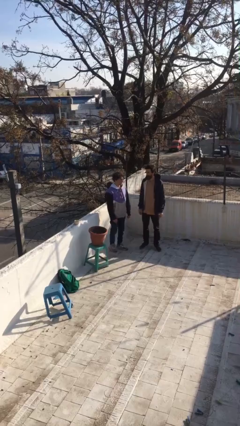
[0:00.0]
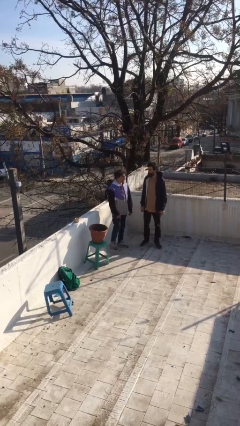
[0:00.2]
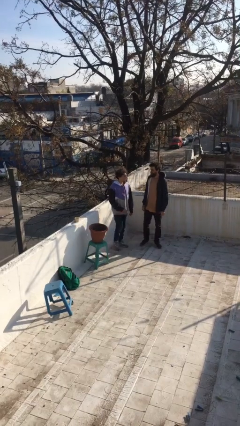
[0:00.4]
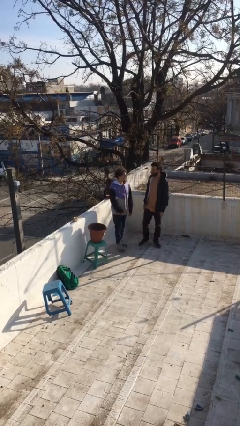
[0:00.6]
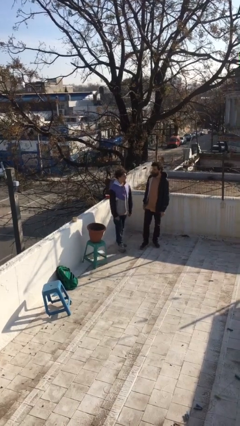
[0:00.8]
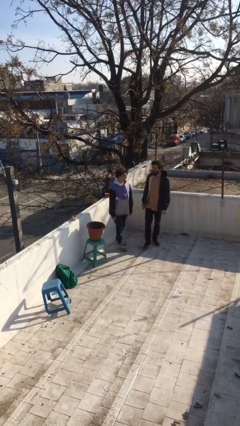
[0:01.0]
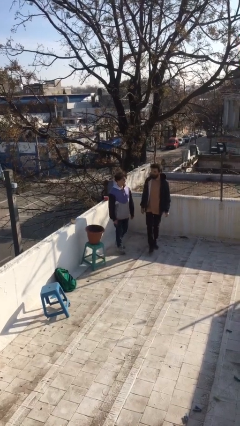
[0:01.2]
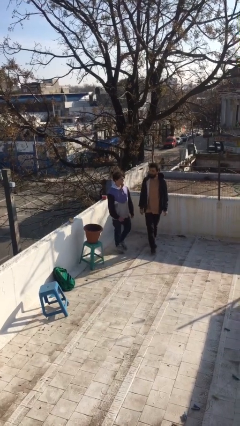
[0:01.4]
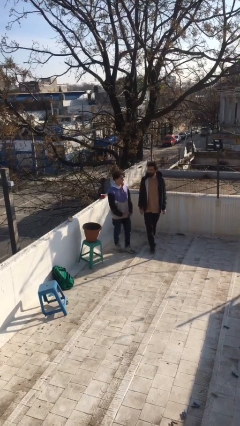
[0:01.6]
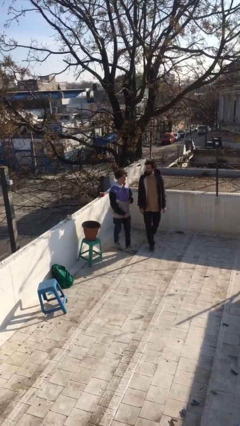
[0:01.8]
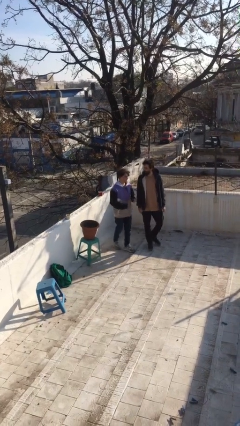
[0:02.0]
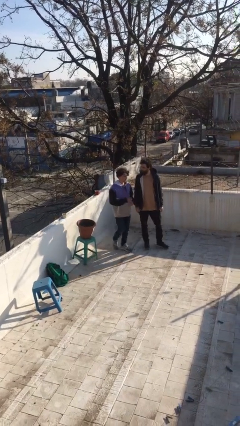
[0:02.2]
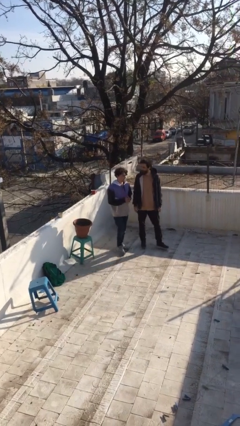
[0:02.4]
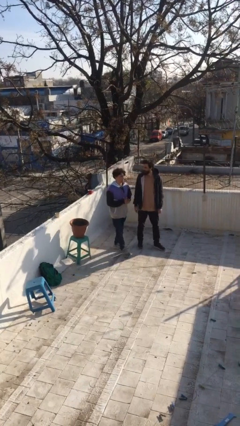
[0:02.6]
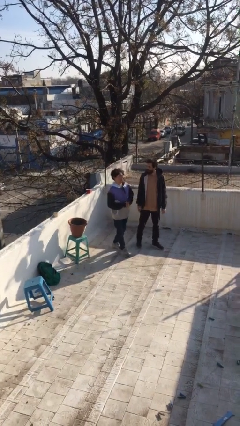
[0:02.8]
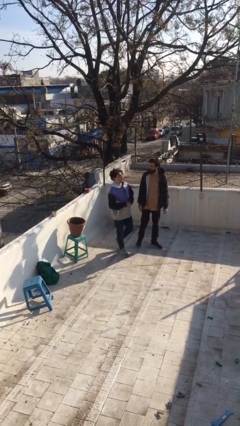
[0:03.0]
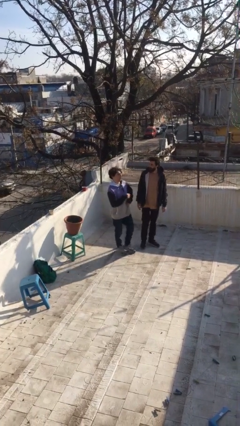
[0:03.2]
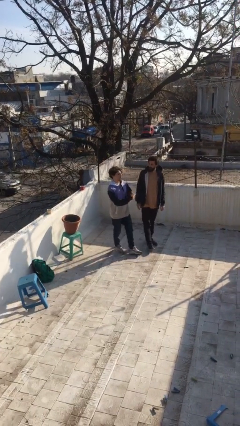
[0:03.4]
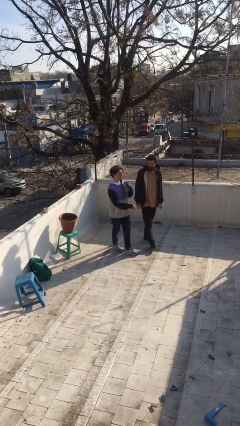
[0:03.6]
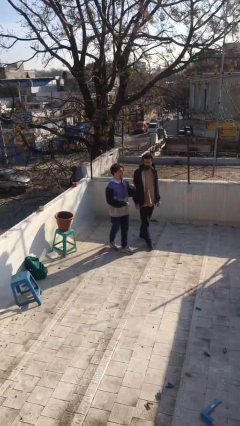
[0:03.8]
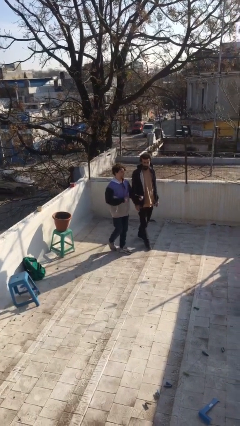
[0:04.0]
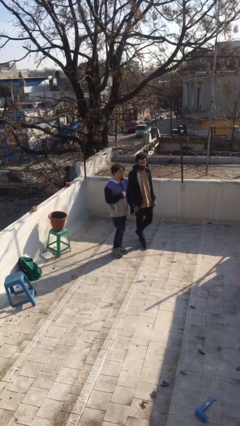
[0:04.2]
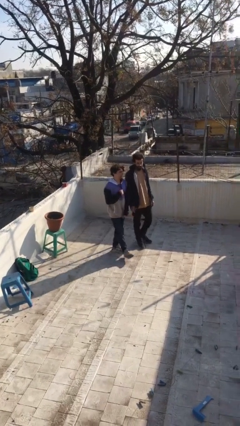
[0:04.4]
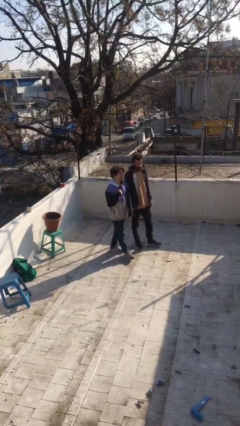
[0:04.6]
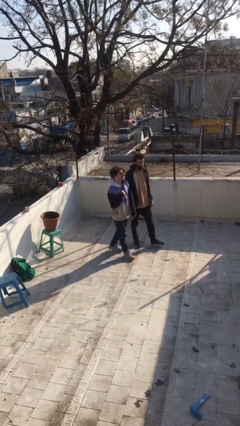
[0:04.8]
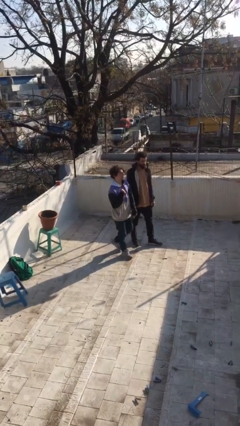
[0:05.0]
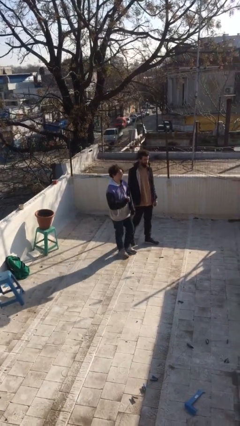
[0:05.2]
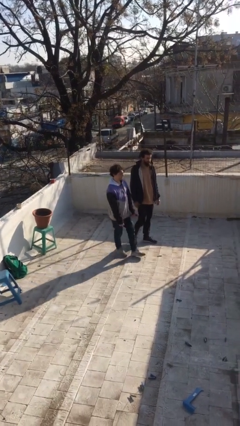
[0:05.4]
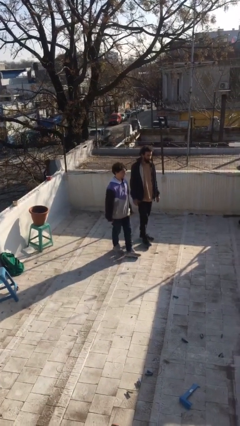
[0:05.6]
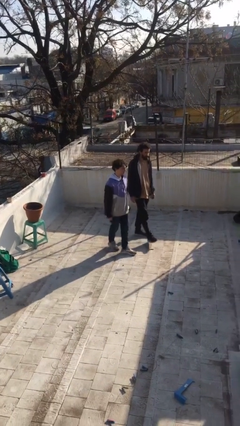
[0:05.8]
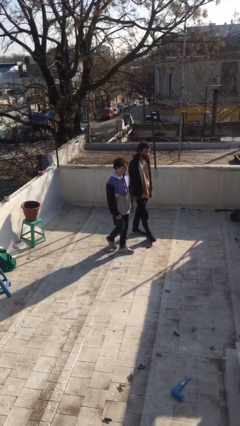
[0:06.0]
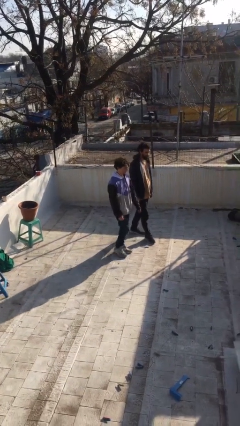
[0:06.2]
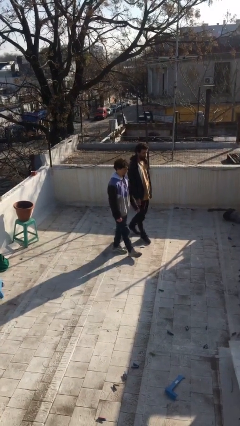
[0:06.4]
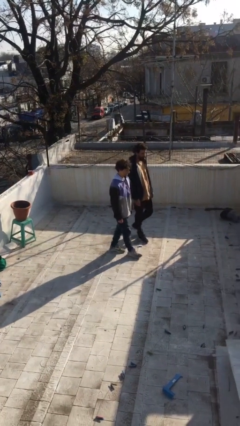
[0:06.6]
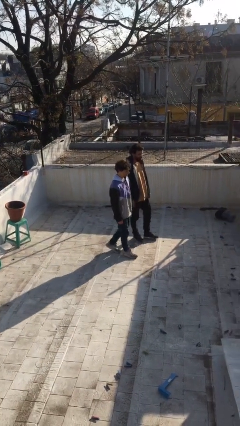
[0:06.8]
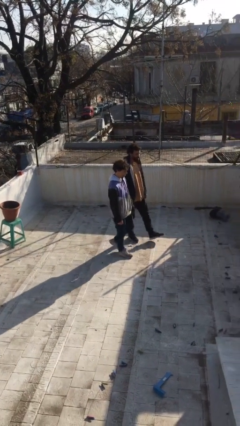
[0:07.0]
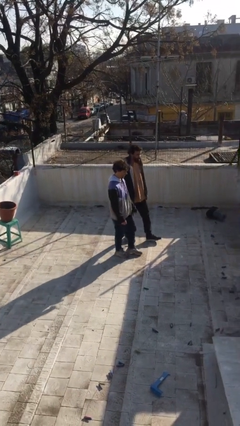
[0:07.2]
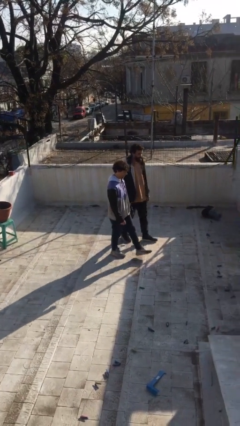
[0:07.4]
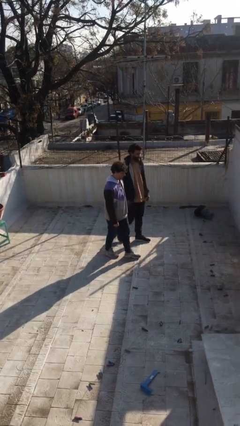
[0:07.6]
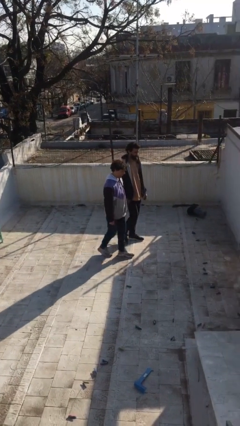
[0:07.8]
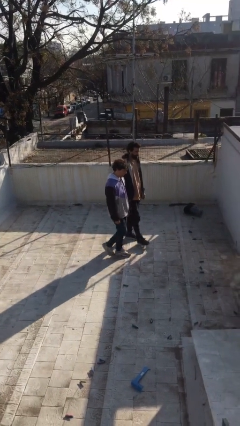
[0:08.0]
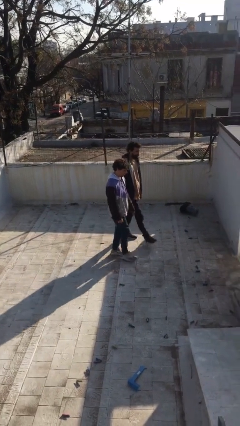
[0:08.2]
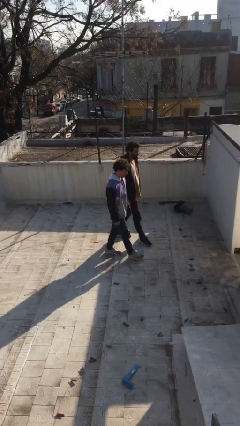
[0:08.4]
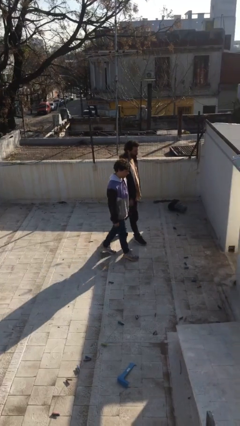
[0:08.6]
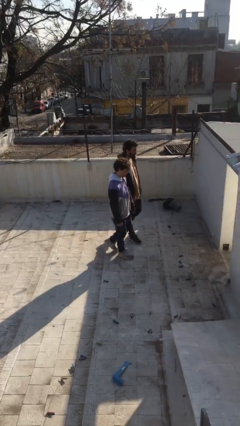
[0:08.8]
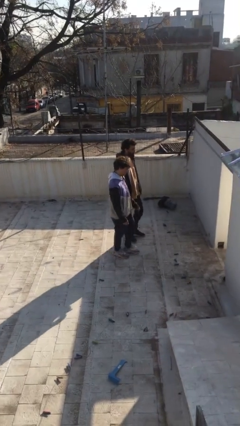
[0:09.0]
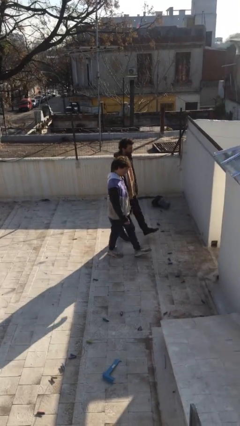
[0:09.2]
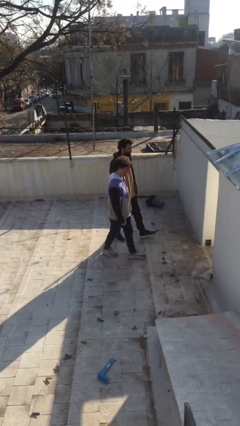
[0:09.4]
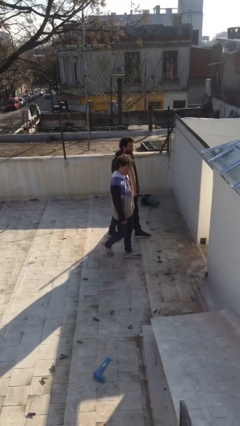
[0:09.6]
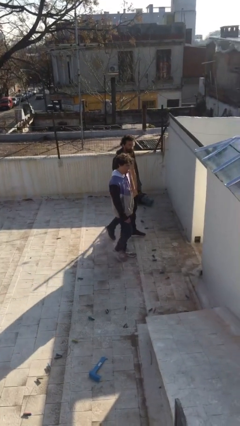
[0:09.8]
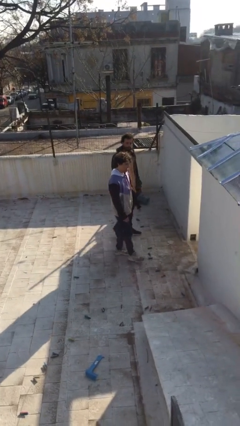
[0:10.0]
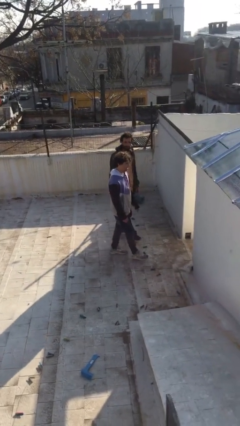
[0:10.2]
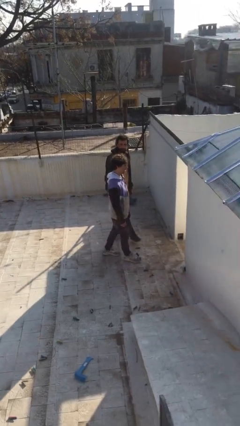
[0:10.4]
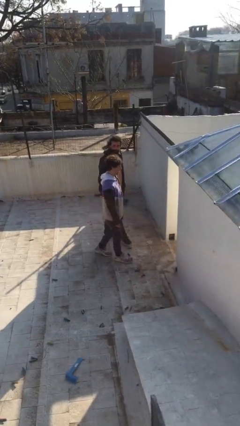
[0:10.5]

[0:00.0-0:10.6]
person talks to person

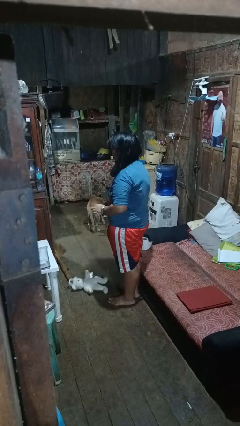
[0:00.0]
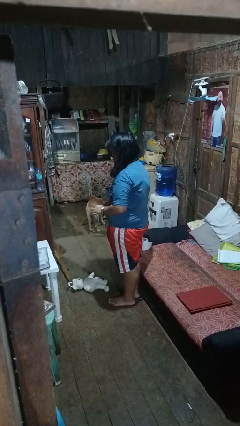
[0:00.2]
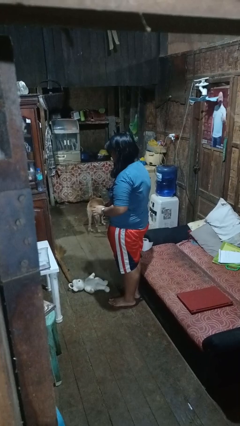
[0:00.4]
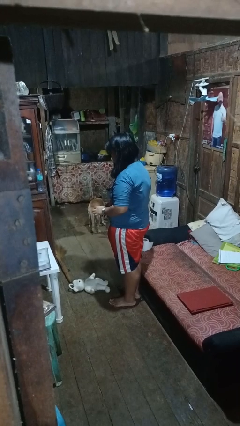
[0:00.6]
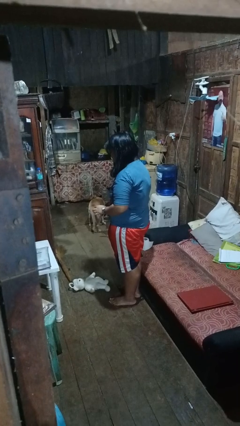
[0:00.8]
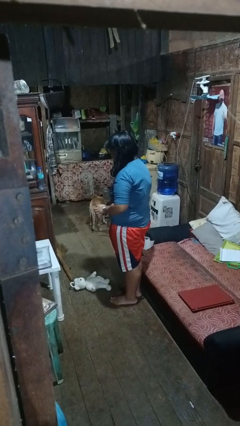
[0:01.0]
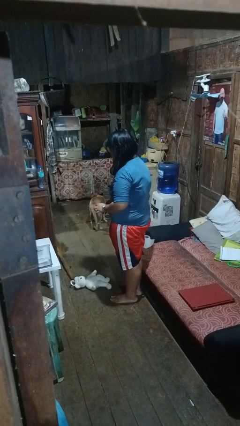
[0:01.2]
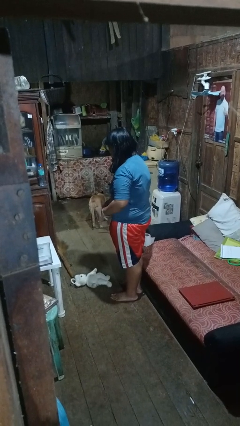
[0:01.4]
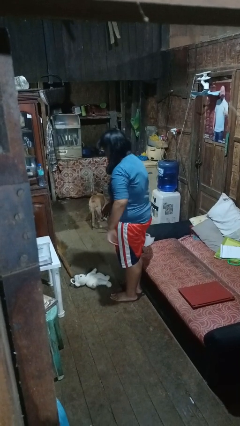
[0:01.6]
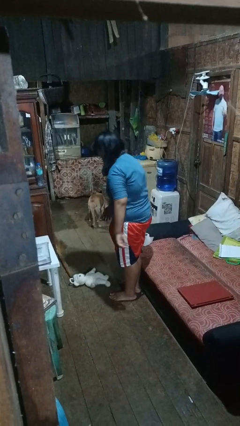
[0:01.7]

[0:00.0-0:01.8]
person drops object

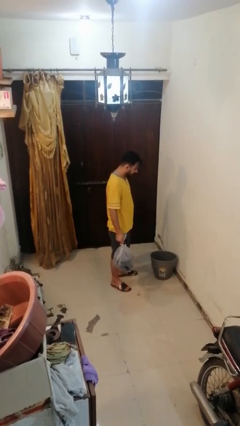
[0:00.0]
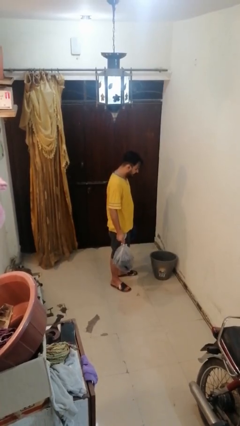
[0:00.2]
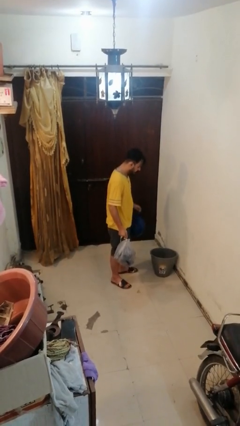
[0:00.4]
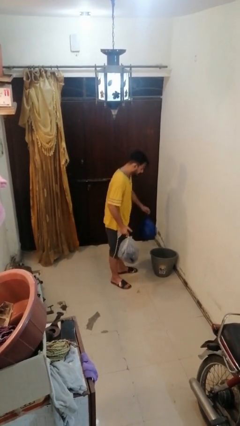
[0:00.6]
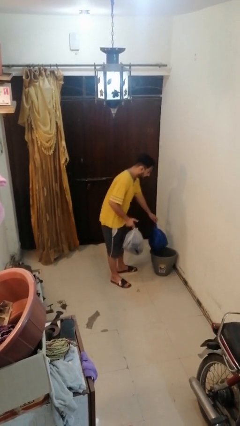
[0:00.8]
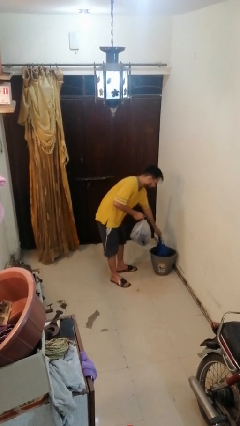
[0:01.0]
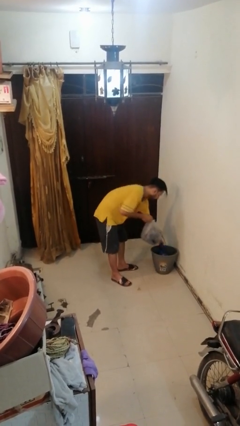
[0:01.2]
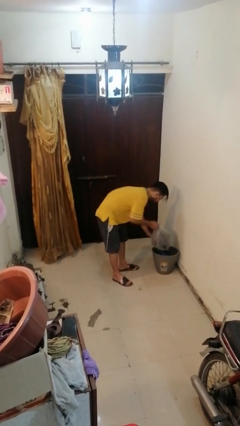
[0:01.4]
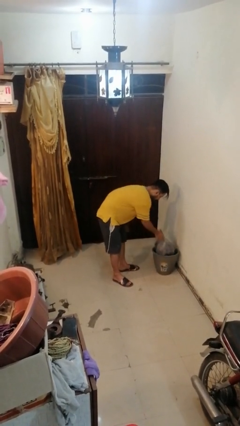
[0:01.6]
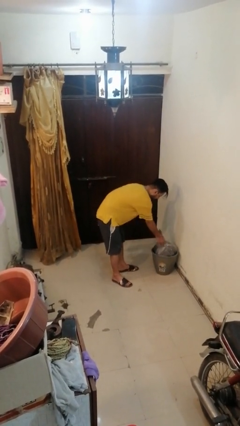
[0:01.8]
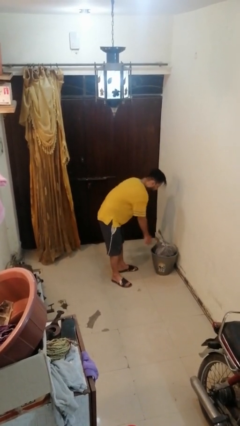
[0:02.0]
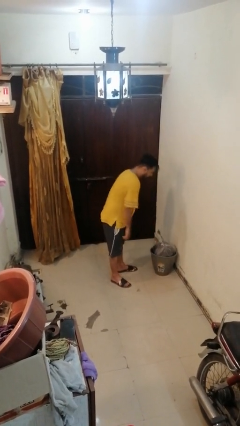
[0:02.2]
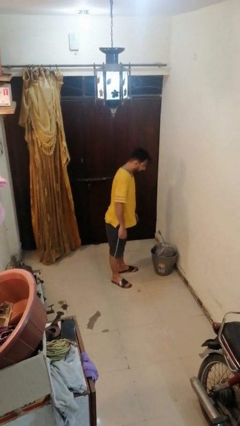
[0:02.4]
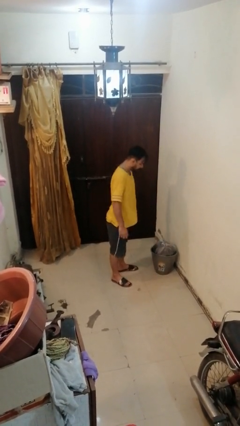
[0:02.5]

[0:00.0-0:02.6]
person discards trash

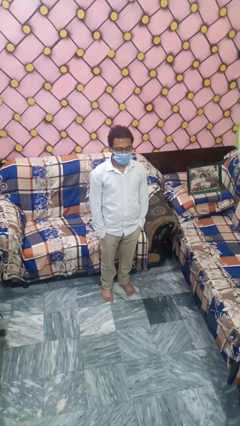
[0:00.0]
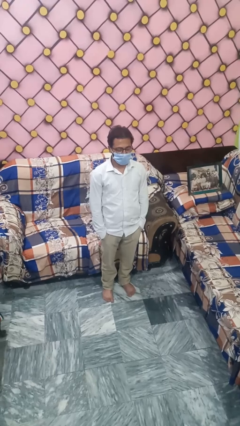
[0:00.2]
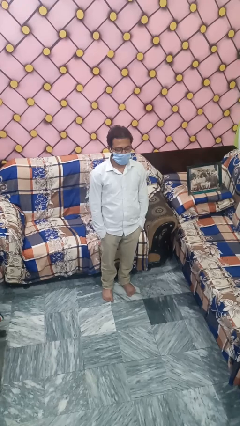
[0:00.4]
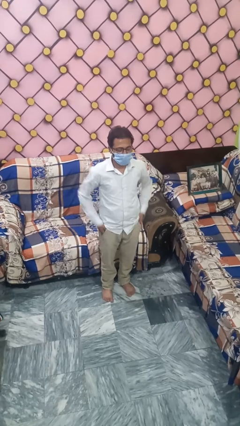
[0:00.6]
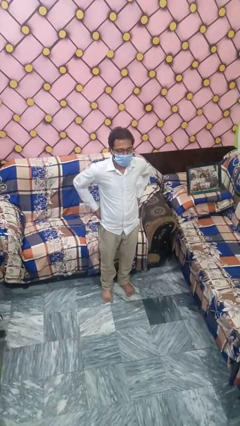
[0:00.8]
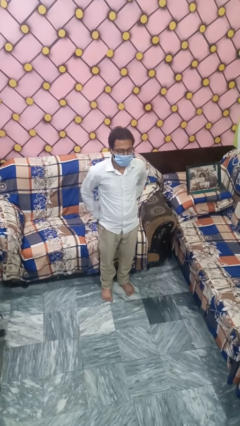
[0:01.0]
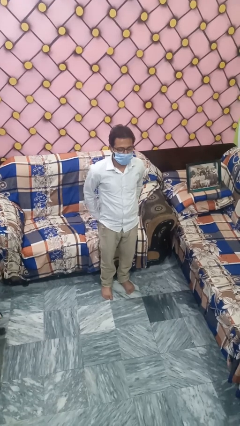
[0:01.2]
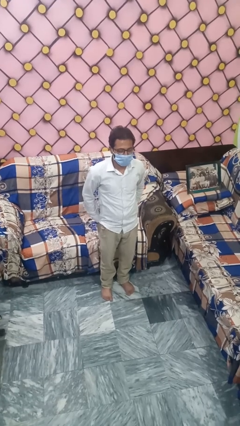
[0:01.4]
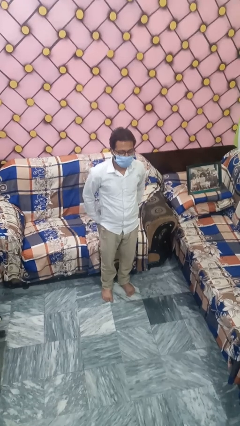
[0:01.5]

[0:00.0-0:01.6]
person puts hands in back pockets

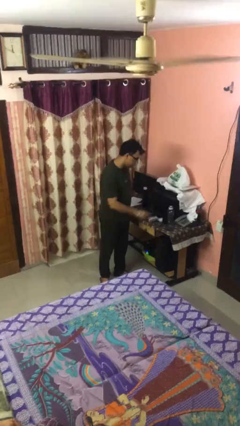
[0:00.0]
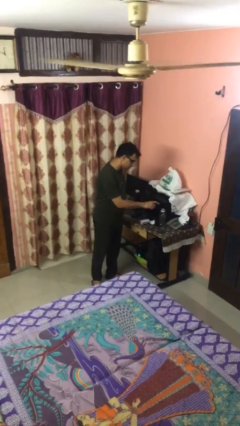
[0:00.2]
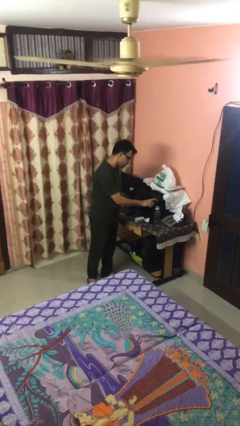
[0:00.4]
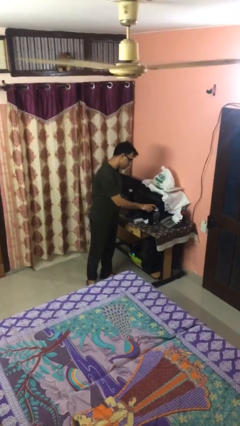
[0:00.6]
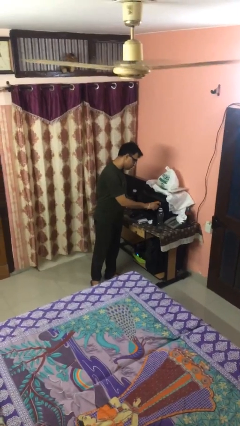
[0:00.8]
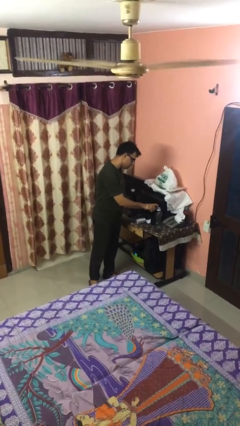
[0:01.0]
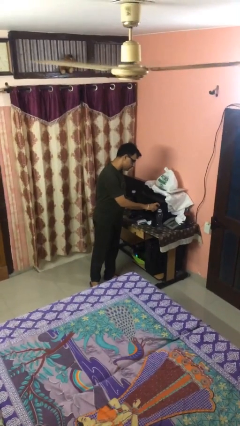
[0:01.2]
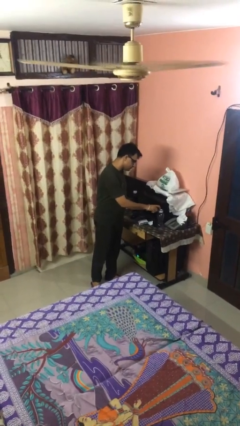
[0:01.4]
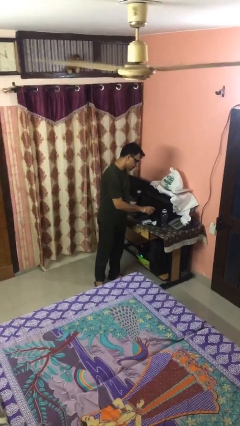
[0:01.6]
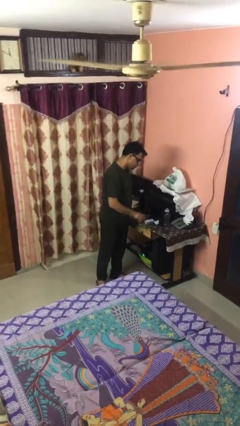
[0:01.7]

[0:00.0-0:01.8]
person taps object with finger
